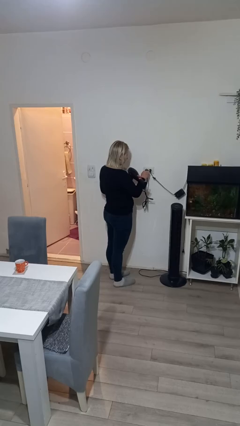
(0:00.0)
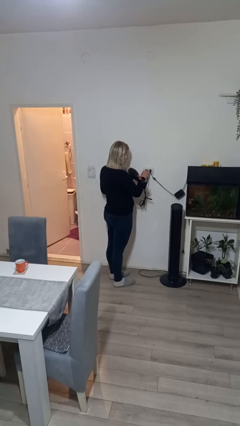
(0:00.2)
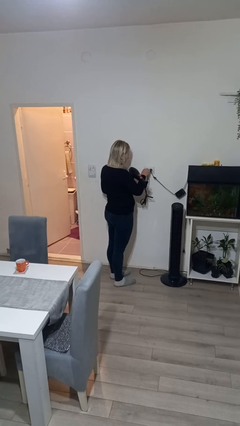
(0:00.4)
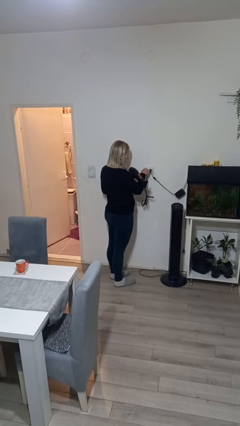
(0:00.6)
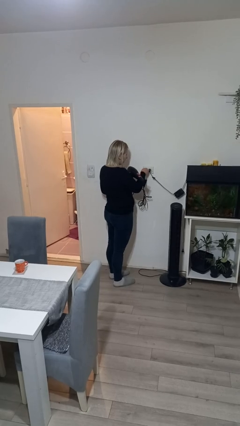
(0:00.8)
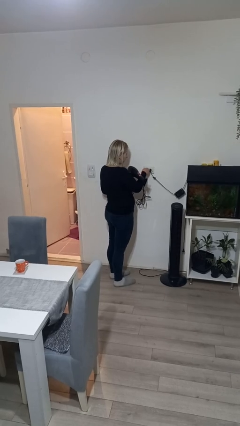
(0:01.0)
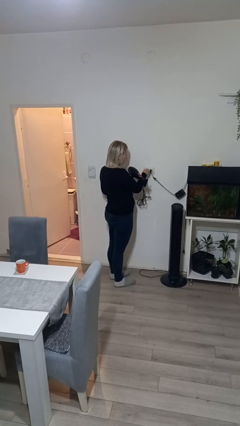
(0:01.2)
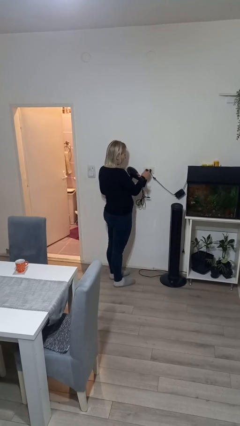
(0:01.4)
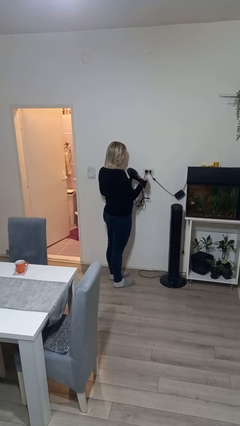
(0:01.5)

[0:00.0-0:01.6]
person plugs into electrical socket

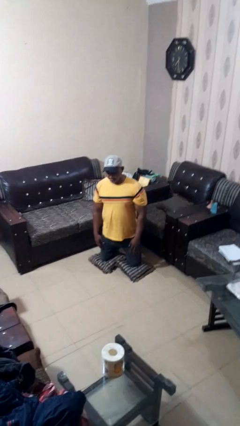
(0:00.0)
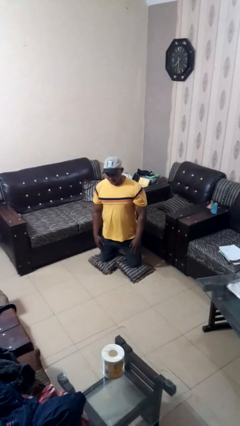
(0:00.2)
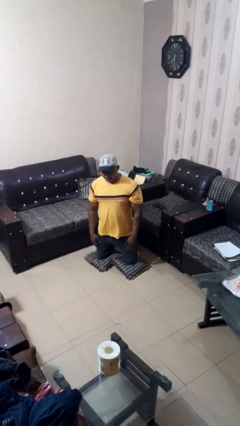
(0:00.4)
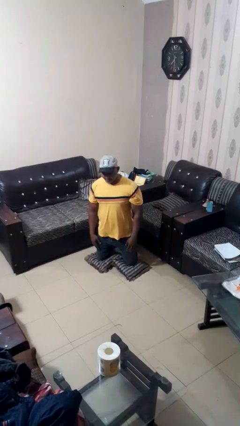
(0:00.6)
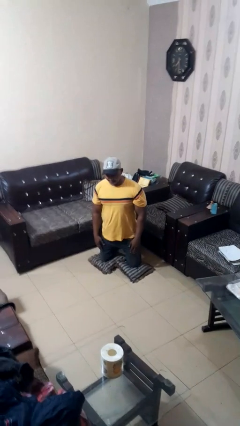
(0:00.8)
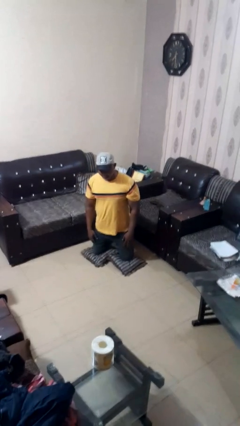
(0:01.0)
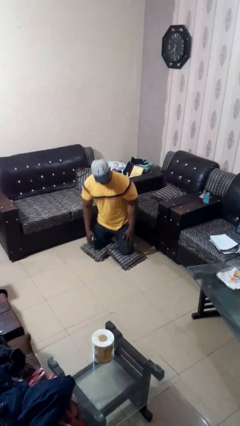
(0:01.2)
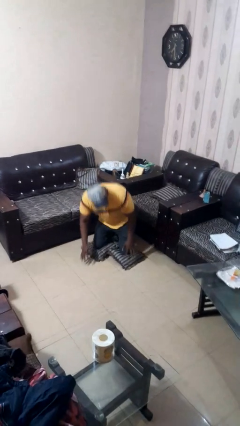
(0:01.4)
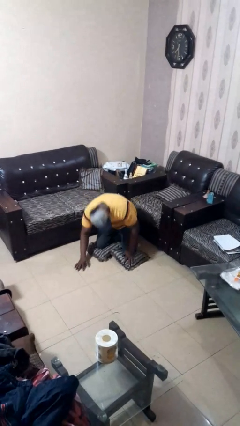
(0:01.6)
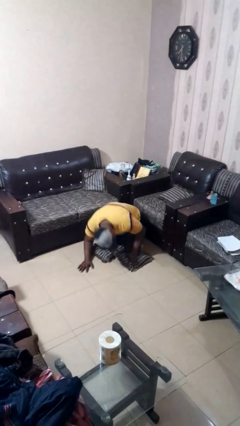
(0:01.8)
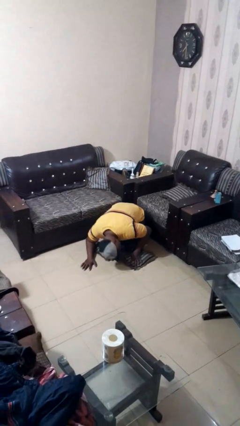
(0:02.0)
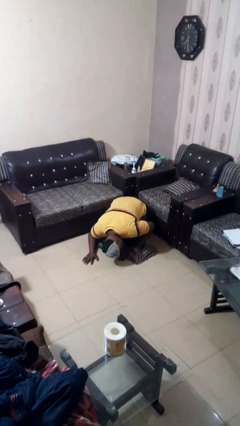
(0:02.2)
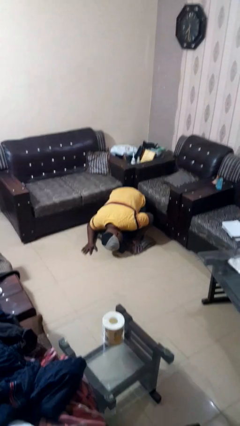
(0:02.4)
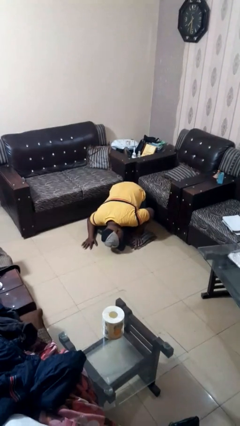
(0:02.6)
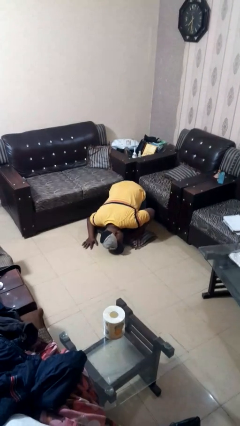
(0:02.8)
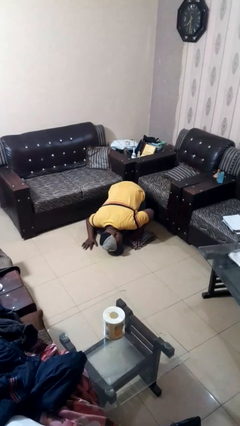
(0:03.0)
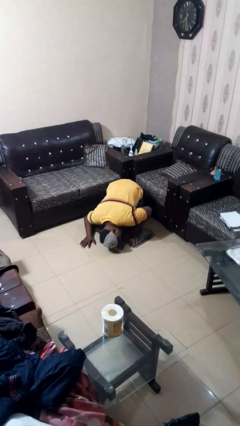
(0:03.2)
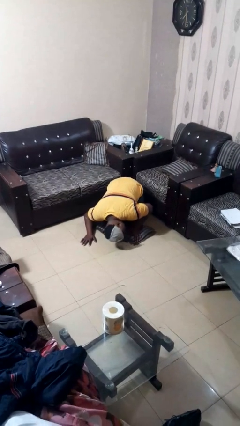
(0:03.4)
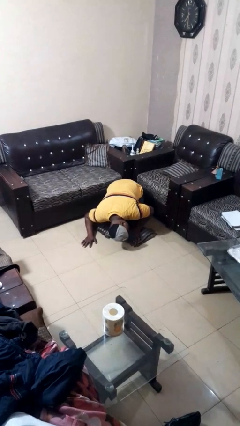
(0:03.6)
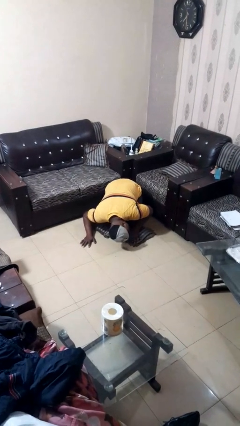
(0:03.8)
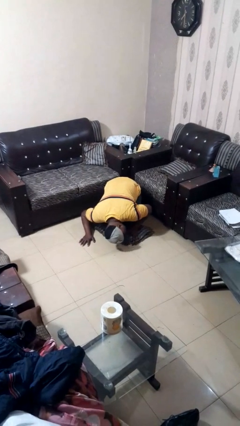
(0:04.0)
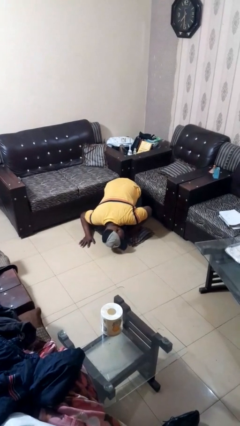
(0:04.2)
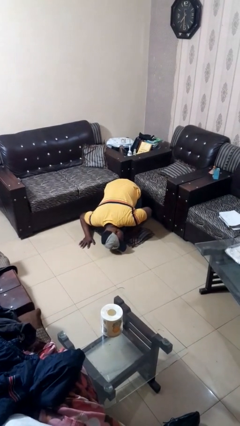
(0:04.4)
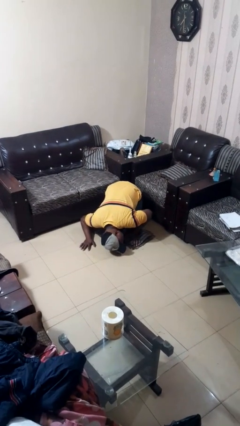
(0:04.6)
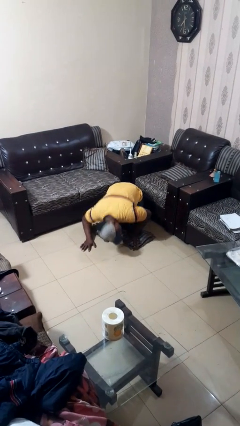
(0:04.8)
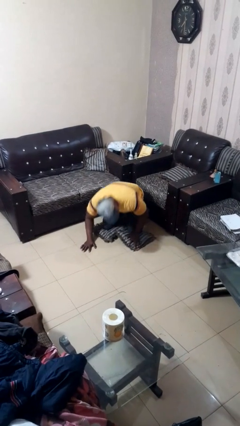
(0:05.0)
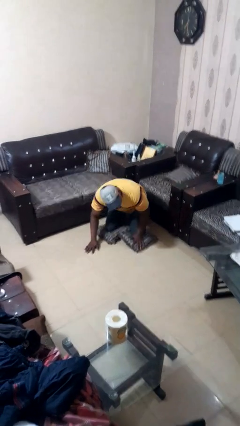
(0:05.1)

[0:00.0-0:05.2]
person searches under couch

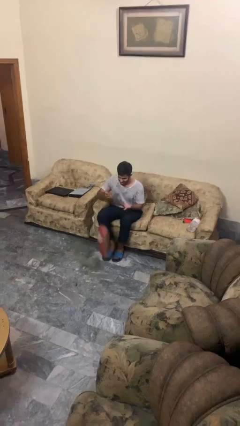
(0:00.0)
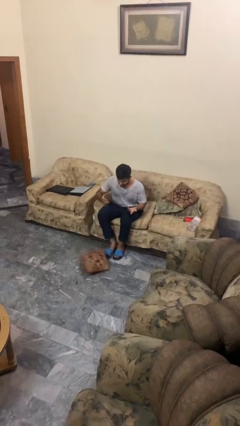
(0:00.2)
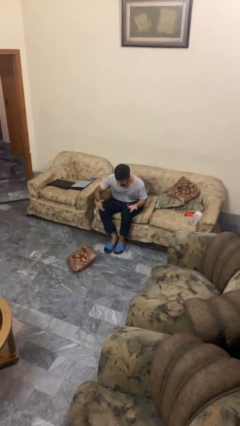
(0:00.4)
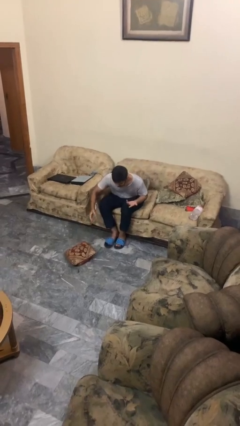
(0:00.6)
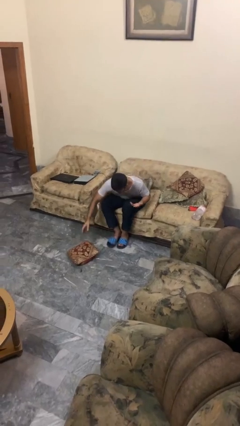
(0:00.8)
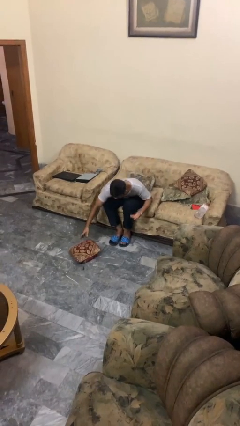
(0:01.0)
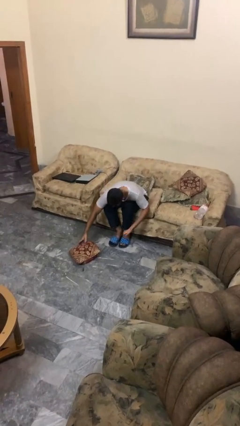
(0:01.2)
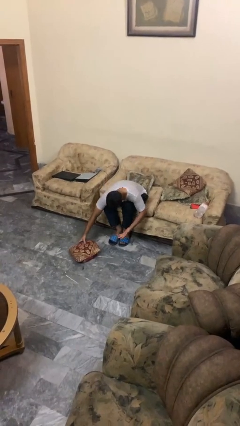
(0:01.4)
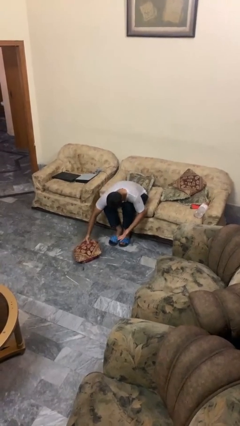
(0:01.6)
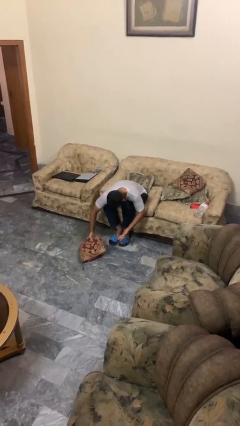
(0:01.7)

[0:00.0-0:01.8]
person drops object

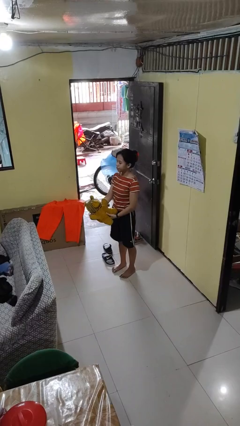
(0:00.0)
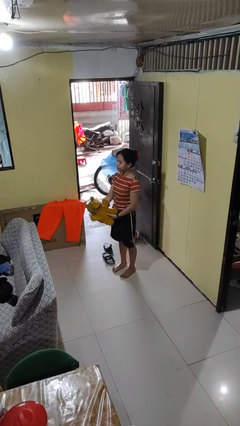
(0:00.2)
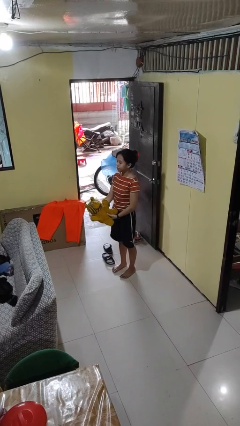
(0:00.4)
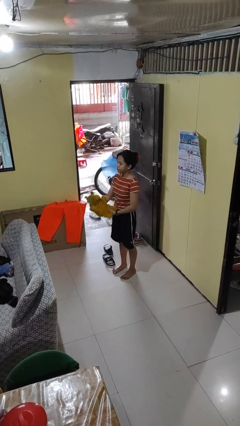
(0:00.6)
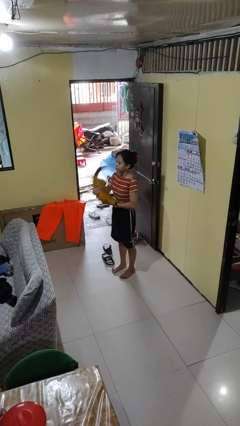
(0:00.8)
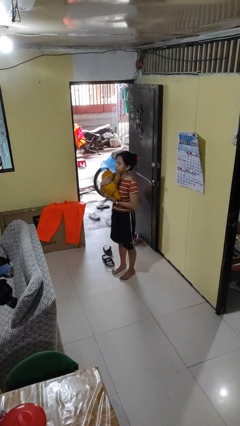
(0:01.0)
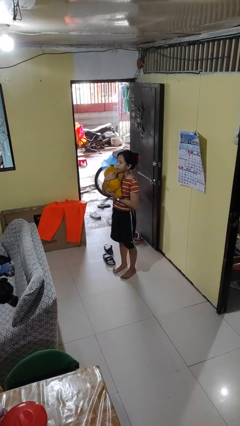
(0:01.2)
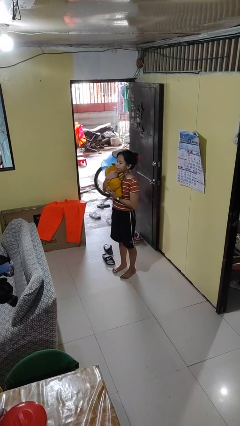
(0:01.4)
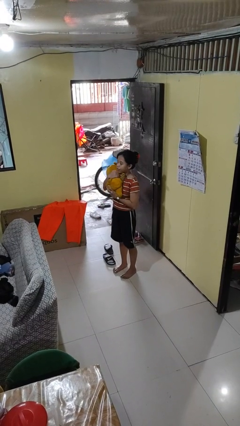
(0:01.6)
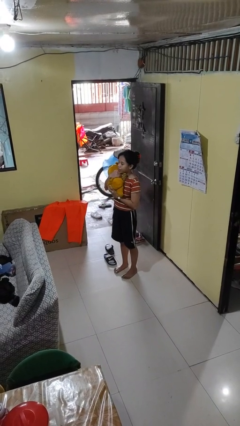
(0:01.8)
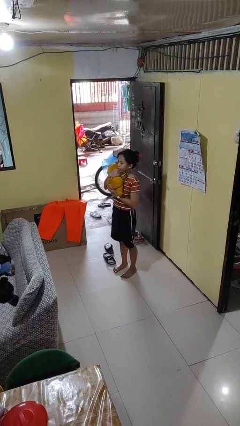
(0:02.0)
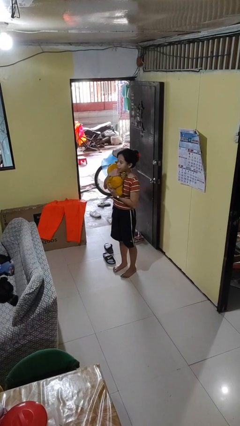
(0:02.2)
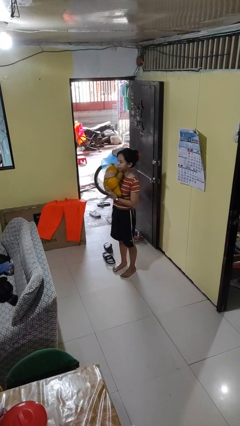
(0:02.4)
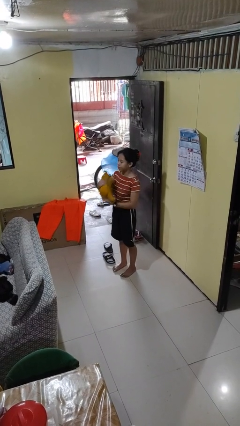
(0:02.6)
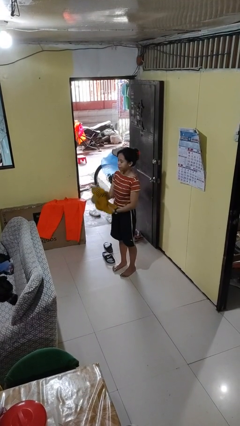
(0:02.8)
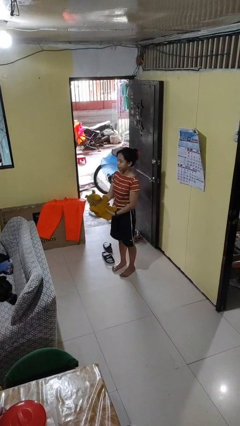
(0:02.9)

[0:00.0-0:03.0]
person hugs stuffed animal

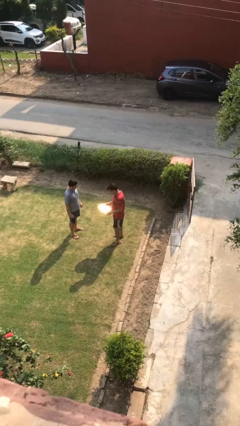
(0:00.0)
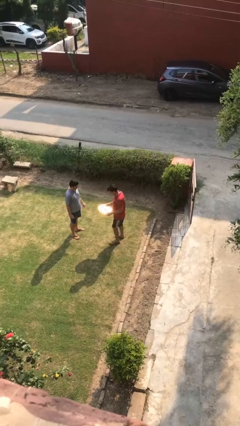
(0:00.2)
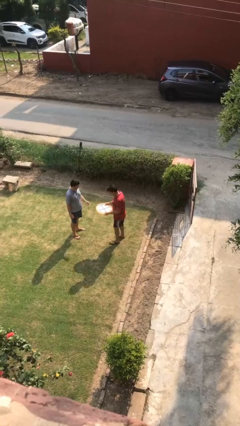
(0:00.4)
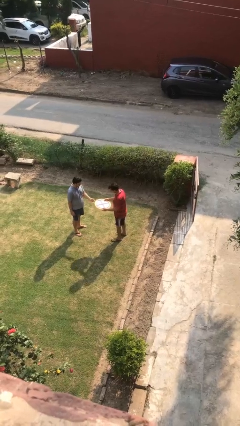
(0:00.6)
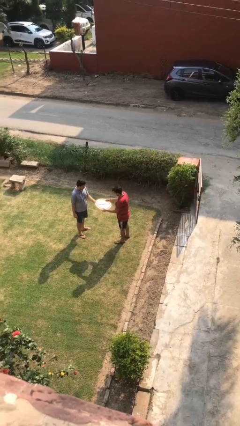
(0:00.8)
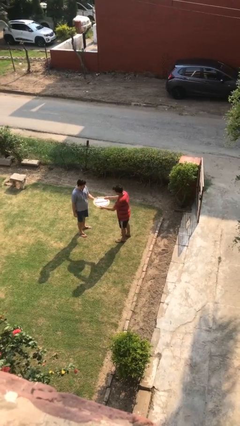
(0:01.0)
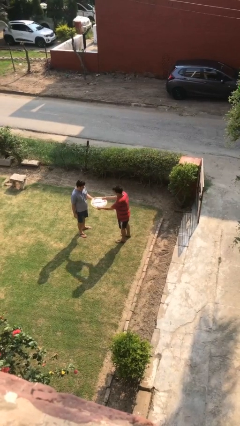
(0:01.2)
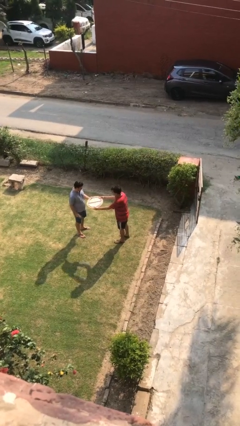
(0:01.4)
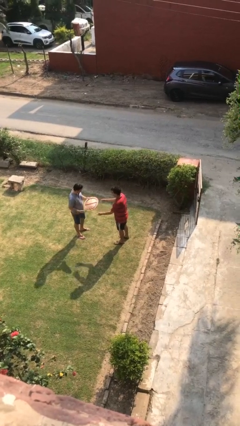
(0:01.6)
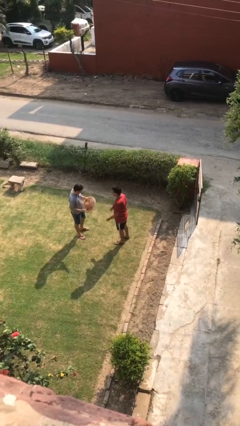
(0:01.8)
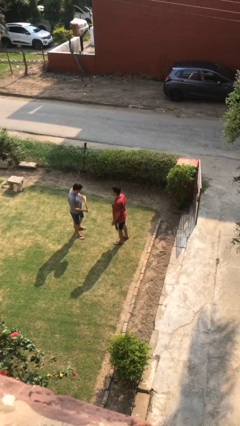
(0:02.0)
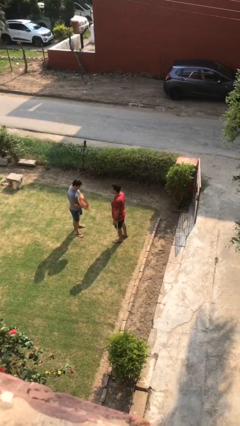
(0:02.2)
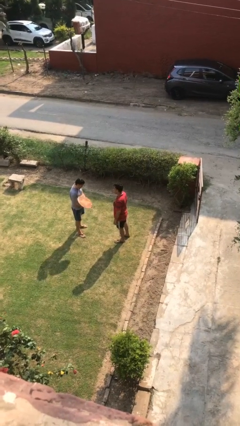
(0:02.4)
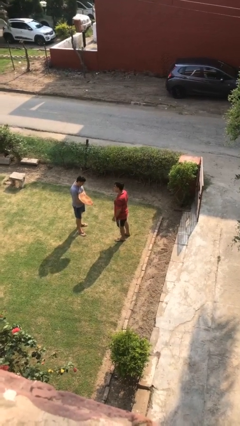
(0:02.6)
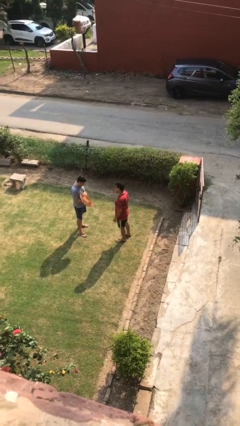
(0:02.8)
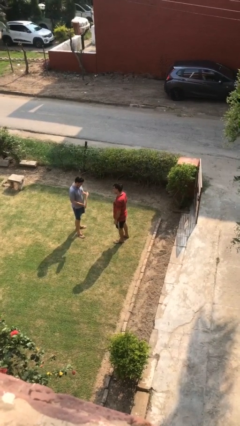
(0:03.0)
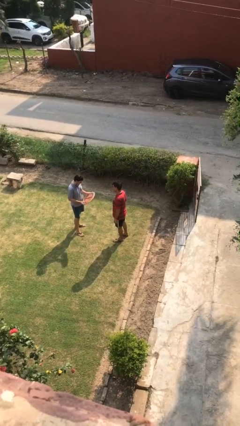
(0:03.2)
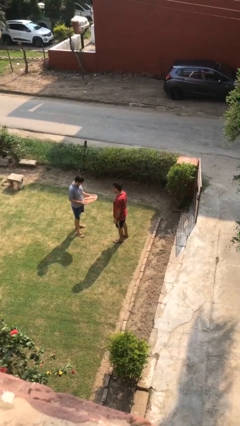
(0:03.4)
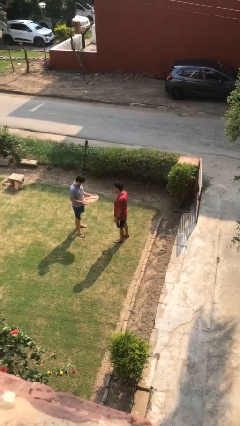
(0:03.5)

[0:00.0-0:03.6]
person transfers object to person

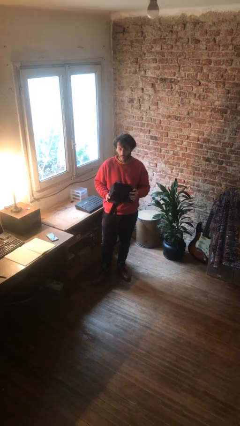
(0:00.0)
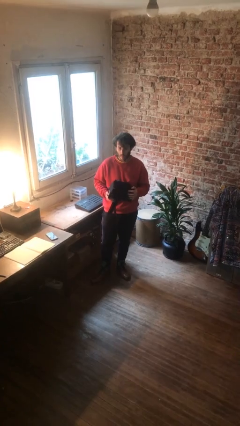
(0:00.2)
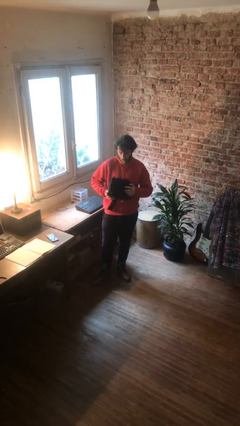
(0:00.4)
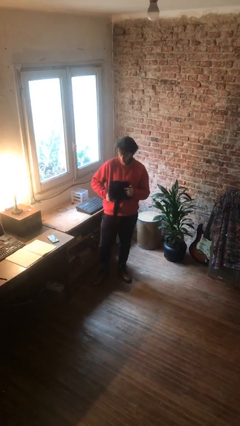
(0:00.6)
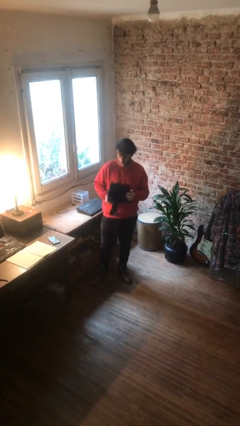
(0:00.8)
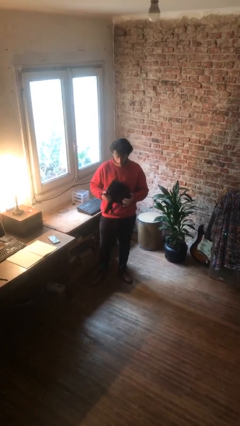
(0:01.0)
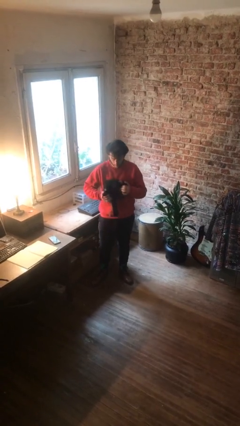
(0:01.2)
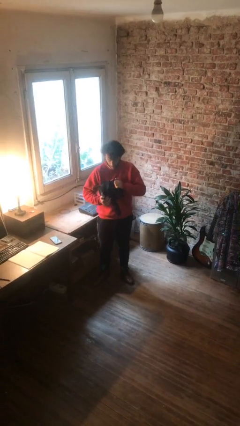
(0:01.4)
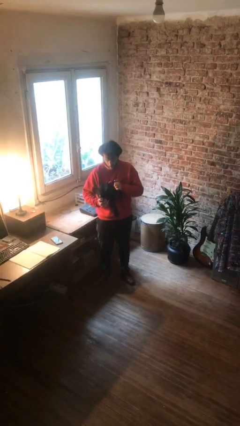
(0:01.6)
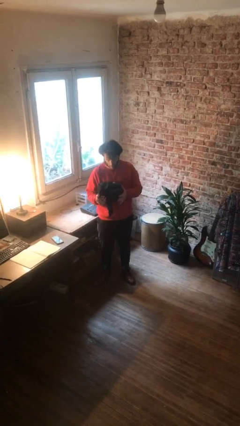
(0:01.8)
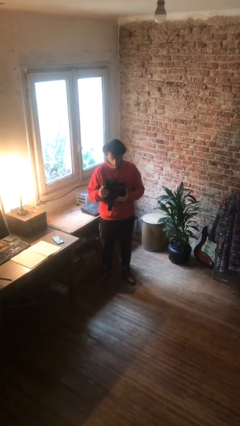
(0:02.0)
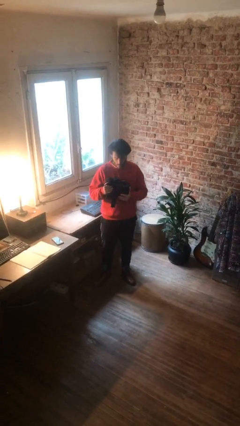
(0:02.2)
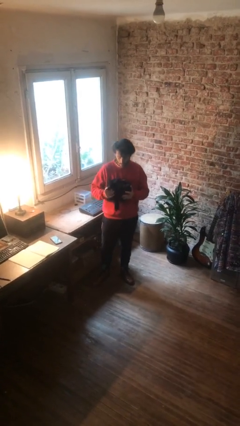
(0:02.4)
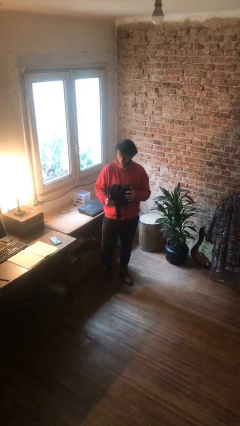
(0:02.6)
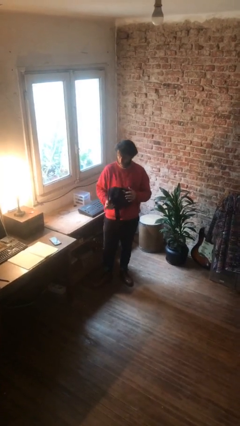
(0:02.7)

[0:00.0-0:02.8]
person squeezes object
